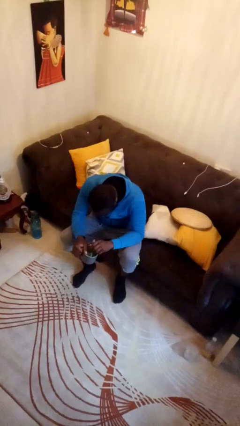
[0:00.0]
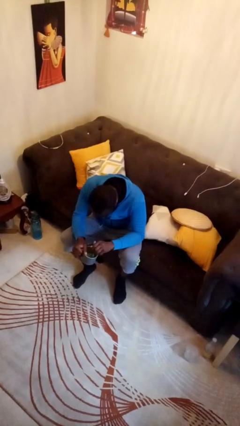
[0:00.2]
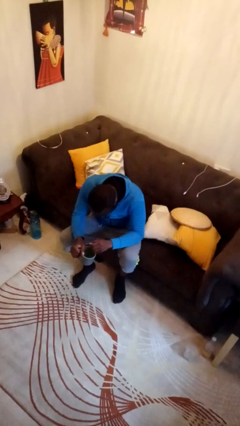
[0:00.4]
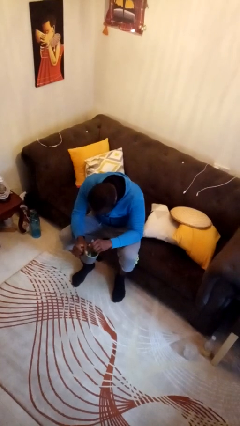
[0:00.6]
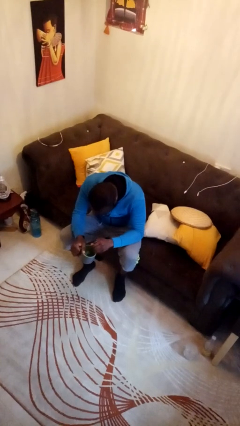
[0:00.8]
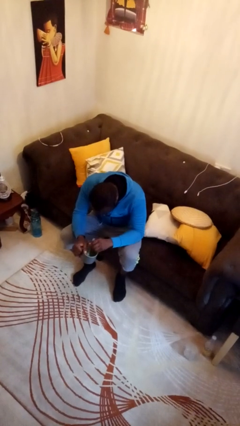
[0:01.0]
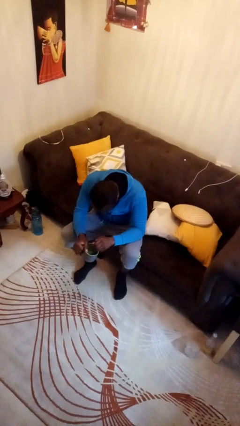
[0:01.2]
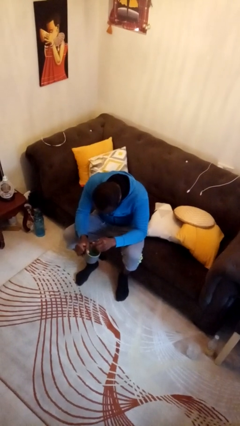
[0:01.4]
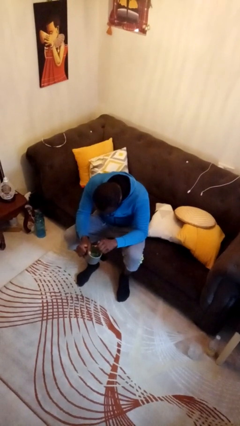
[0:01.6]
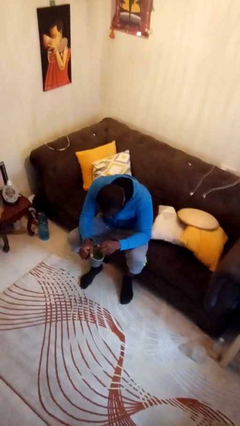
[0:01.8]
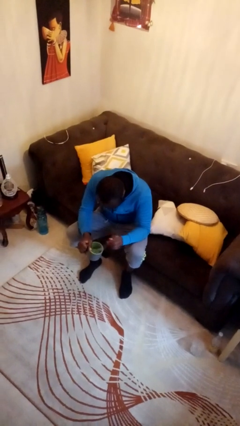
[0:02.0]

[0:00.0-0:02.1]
person stirs mug

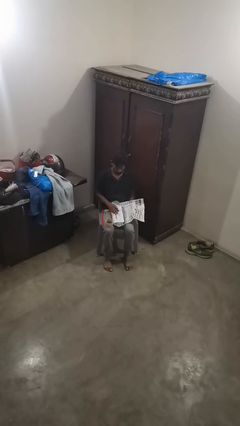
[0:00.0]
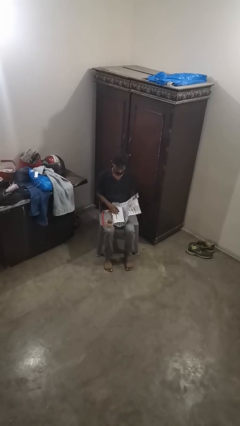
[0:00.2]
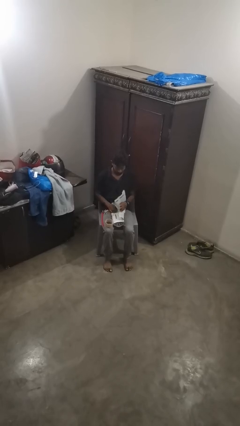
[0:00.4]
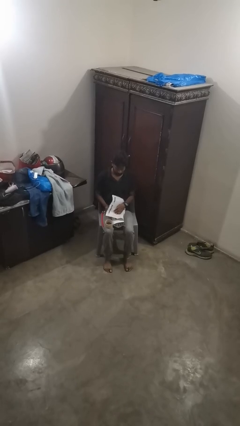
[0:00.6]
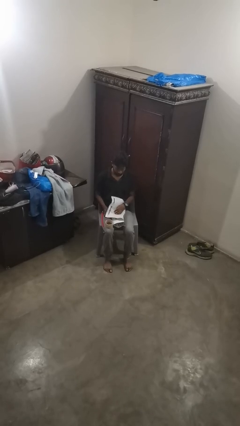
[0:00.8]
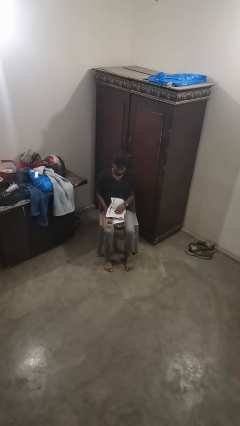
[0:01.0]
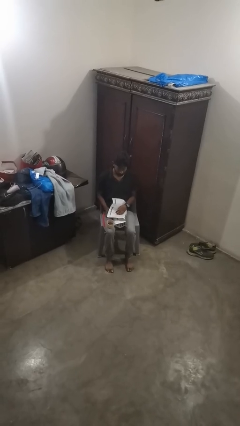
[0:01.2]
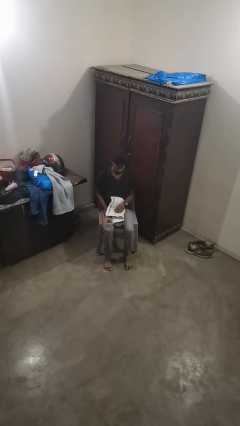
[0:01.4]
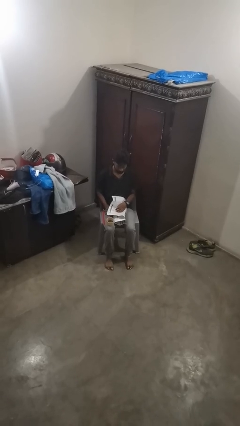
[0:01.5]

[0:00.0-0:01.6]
person wraps box

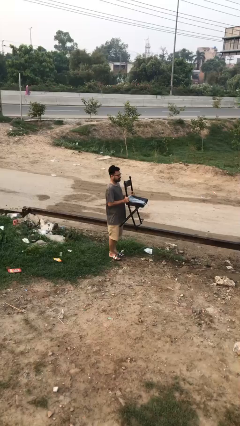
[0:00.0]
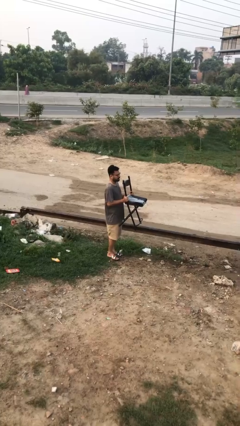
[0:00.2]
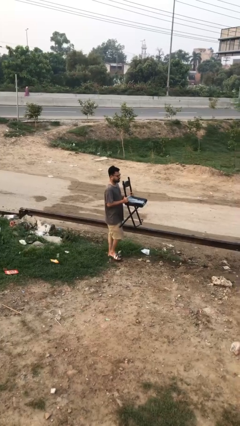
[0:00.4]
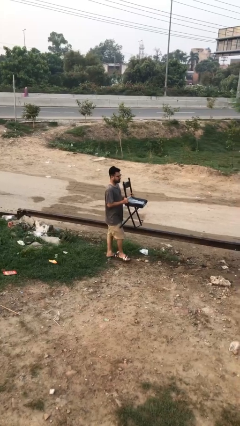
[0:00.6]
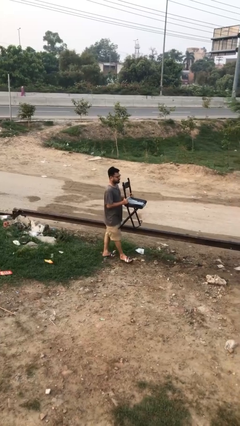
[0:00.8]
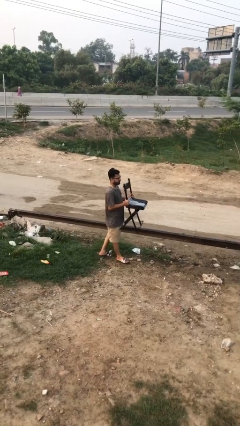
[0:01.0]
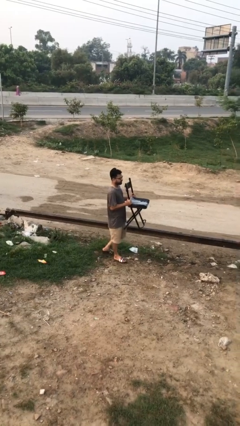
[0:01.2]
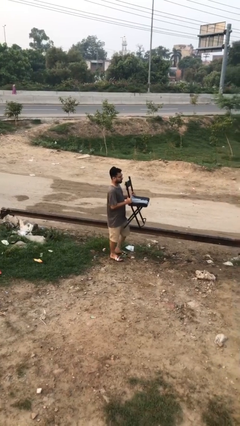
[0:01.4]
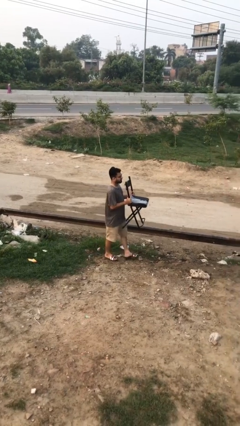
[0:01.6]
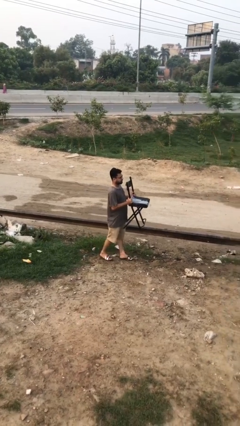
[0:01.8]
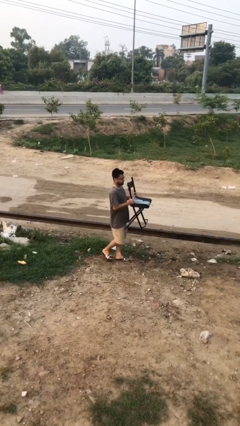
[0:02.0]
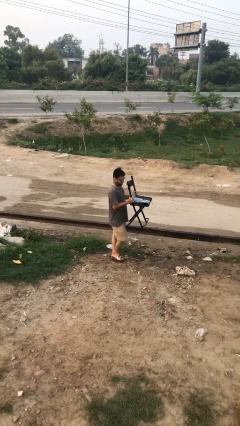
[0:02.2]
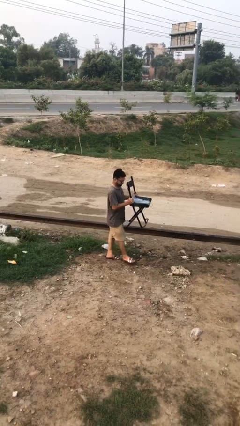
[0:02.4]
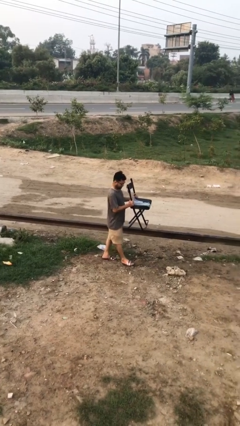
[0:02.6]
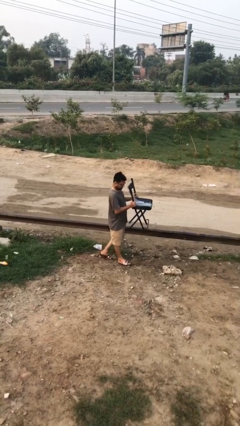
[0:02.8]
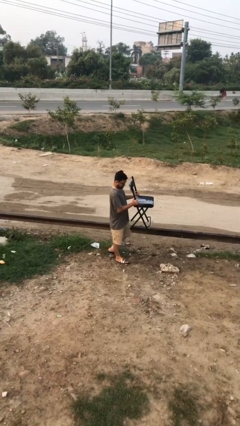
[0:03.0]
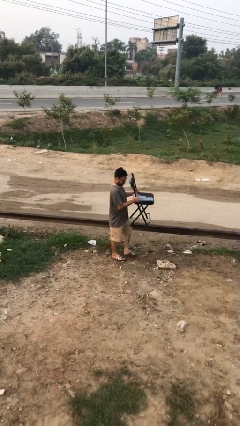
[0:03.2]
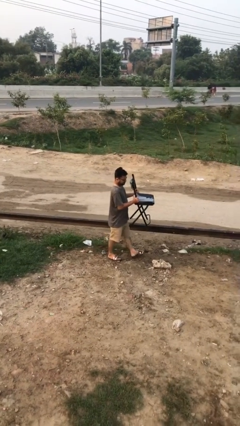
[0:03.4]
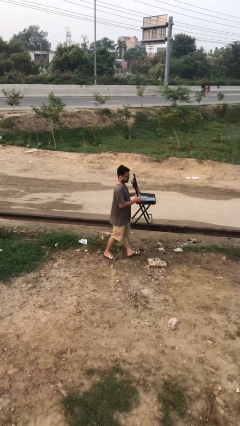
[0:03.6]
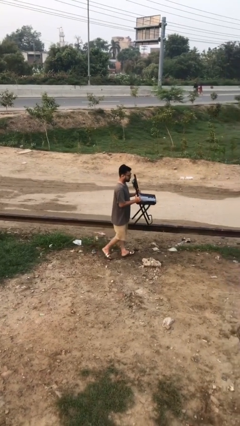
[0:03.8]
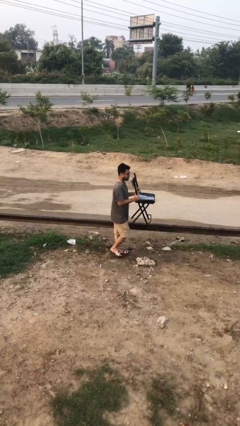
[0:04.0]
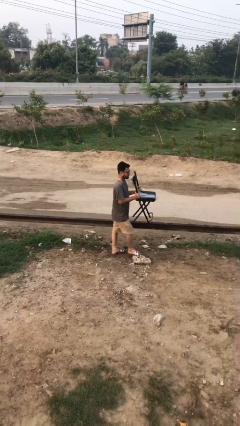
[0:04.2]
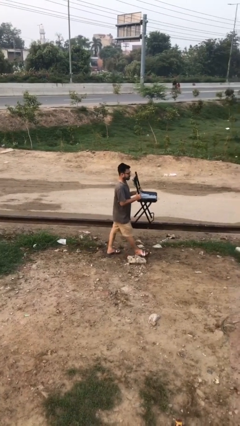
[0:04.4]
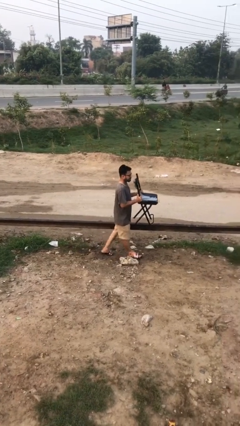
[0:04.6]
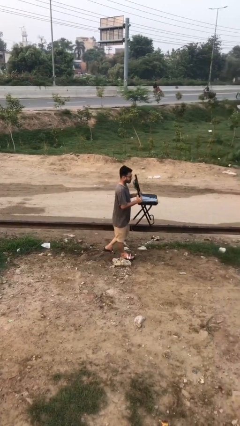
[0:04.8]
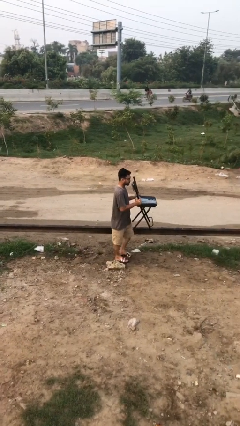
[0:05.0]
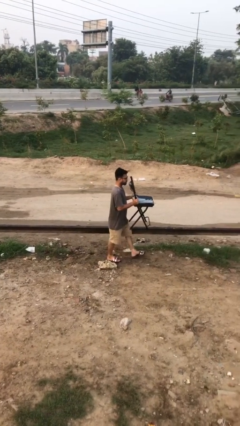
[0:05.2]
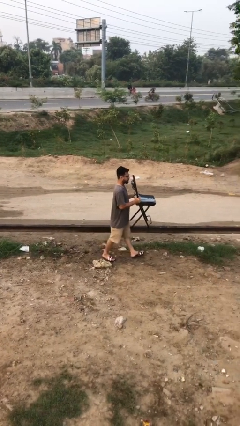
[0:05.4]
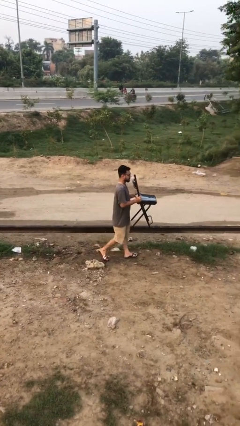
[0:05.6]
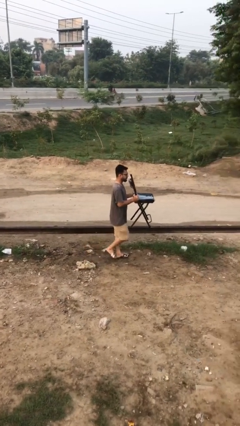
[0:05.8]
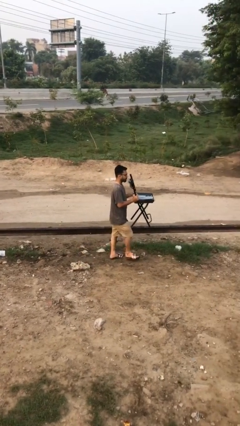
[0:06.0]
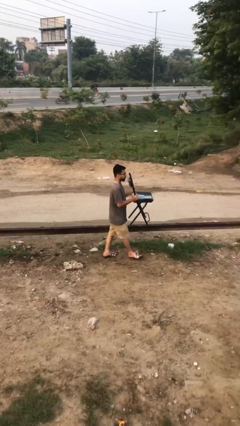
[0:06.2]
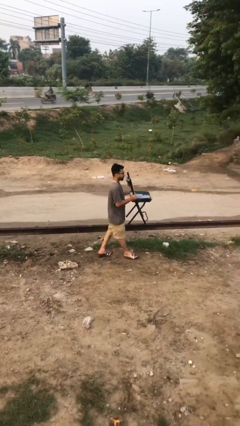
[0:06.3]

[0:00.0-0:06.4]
person carries heavy object

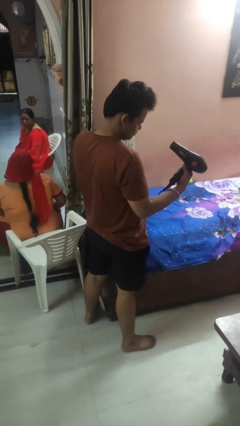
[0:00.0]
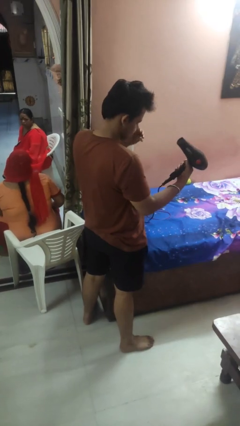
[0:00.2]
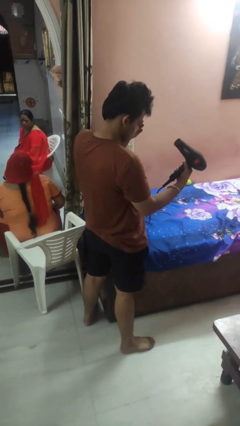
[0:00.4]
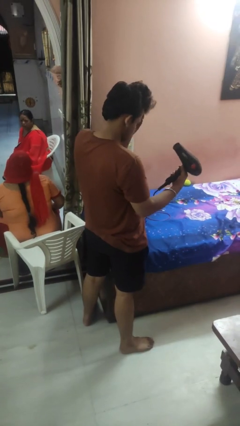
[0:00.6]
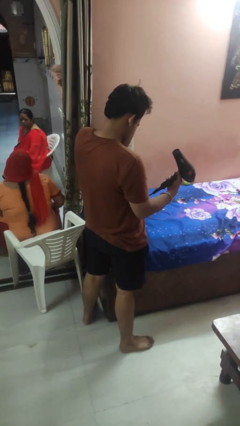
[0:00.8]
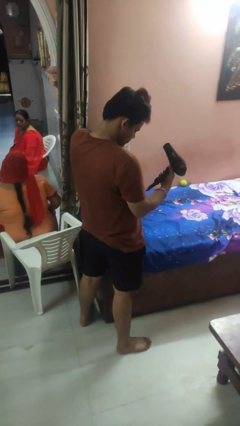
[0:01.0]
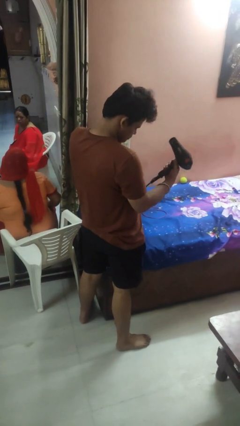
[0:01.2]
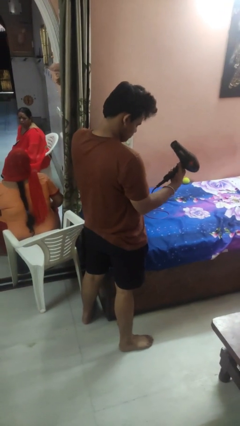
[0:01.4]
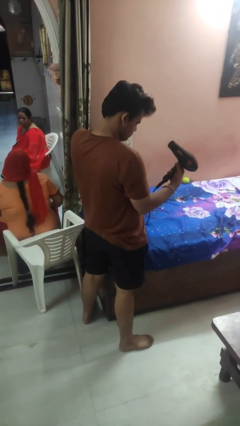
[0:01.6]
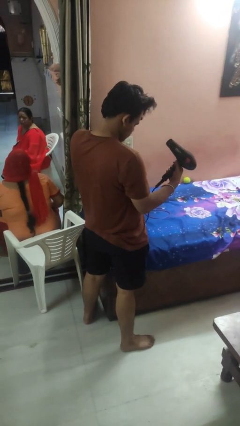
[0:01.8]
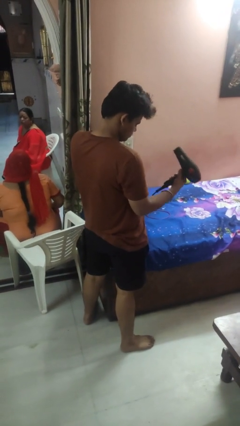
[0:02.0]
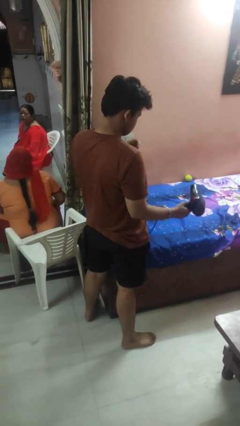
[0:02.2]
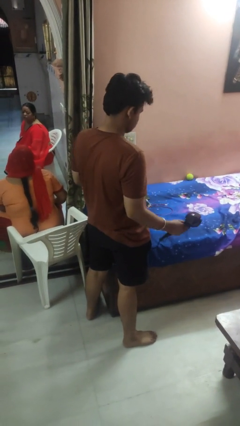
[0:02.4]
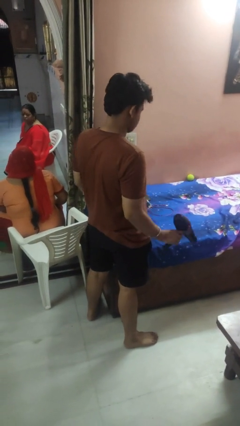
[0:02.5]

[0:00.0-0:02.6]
person dries hair with hairdryer

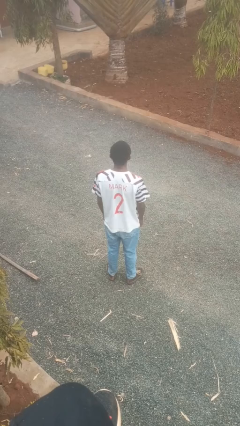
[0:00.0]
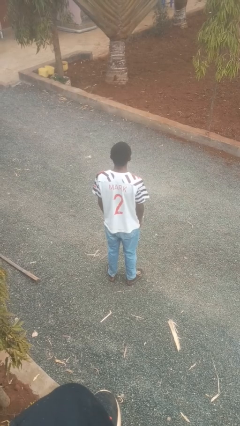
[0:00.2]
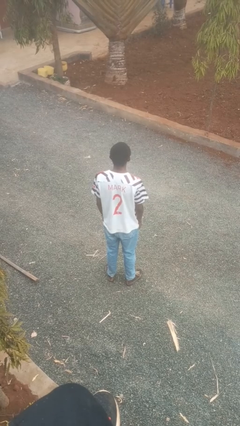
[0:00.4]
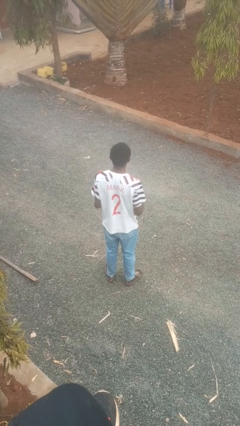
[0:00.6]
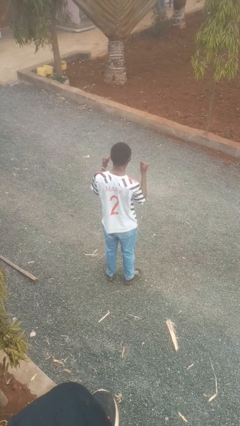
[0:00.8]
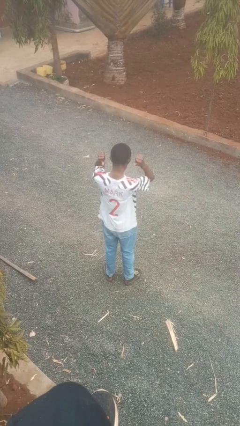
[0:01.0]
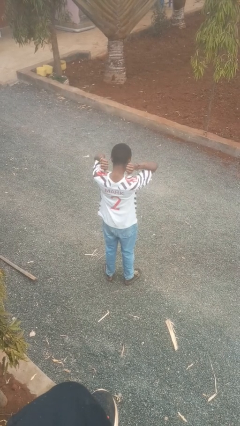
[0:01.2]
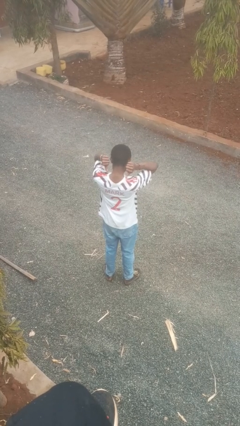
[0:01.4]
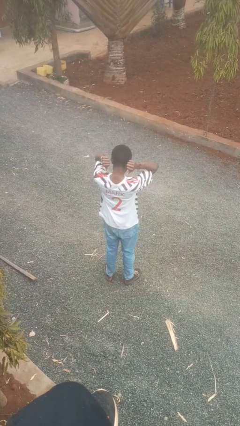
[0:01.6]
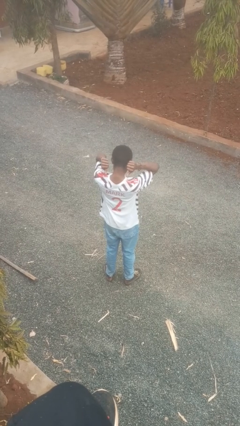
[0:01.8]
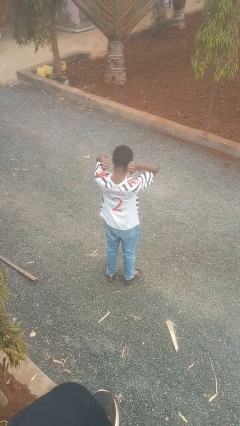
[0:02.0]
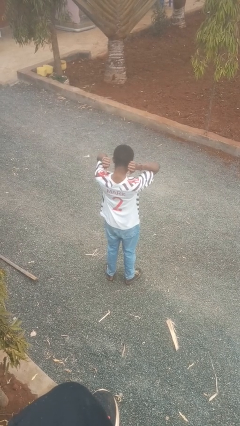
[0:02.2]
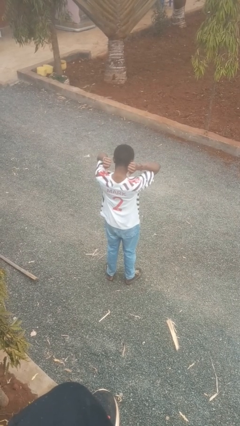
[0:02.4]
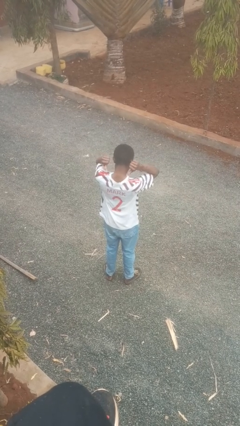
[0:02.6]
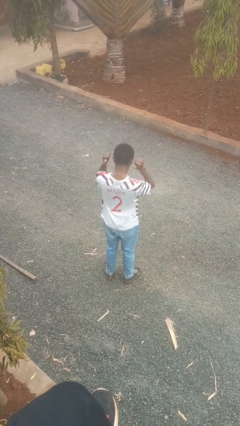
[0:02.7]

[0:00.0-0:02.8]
person gestures behind me

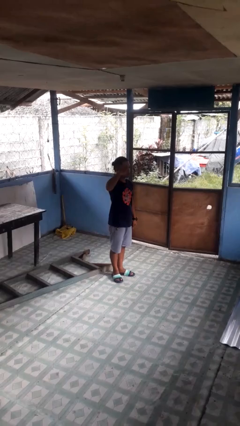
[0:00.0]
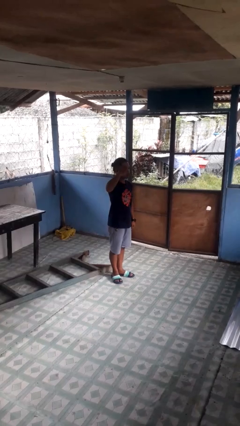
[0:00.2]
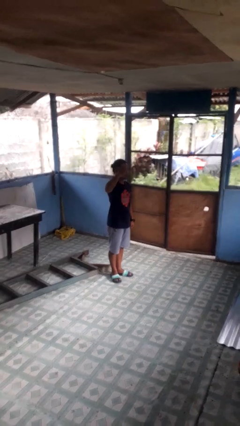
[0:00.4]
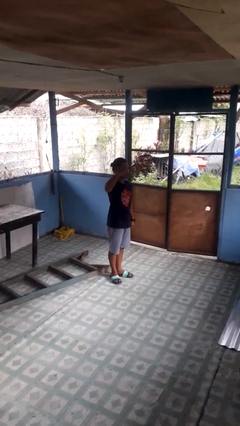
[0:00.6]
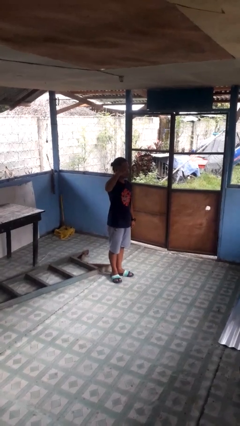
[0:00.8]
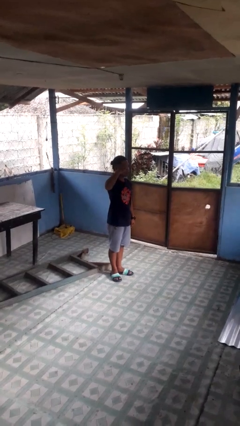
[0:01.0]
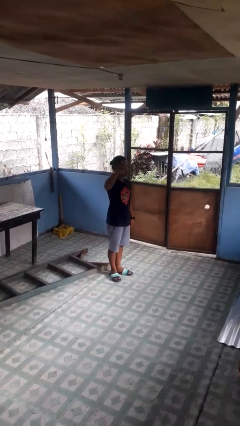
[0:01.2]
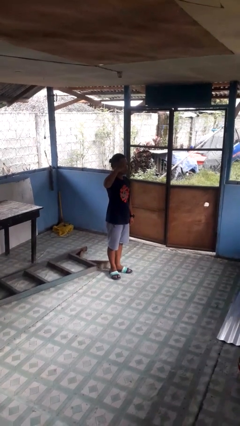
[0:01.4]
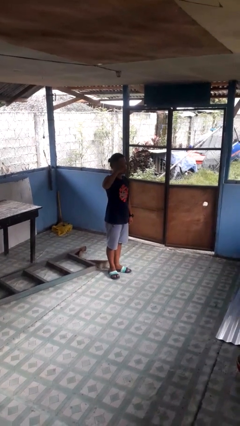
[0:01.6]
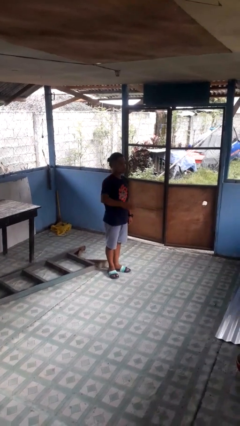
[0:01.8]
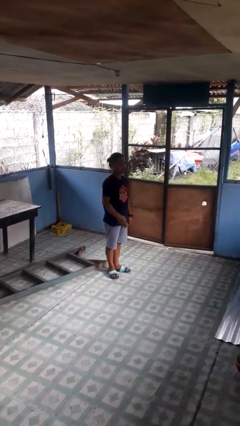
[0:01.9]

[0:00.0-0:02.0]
person salutes
